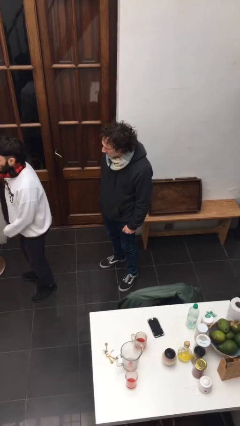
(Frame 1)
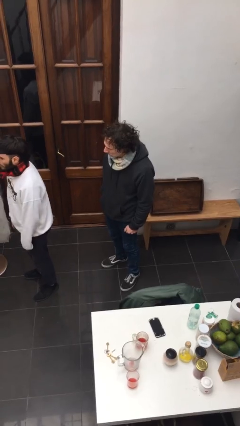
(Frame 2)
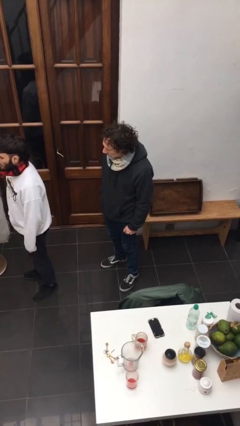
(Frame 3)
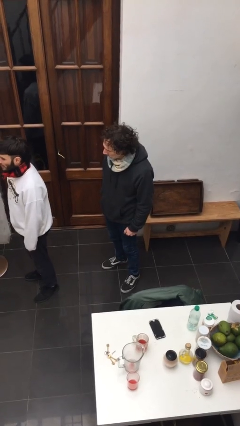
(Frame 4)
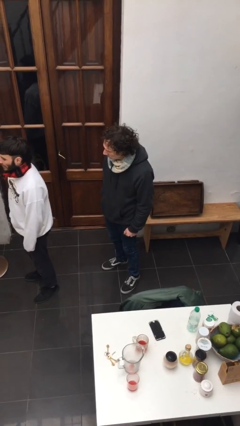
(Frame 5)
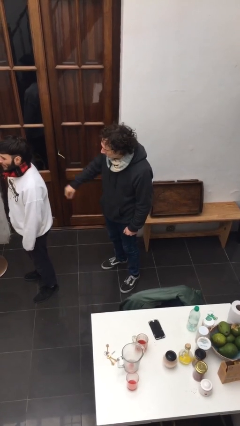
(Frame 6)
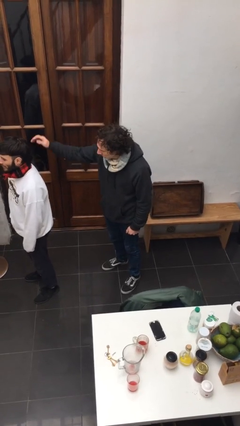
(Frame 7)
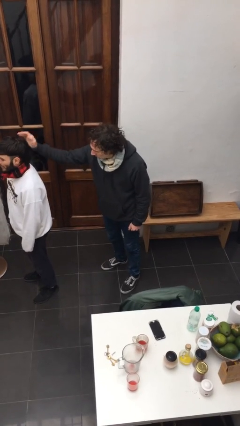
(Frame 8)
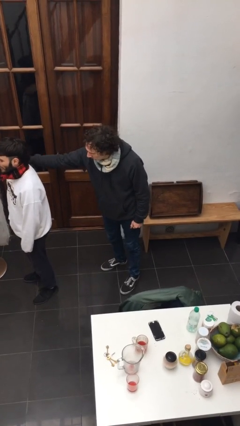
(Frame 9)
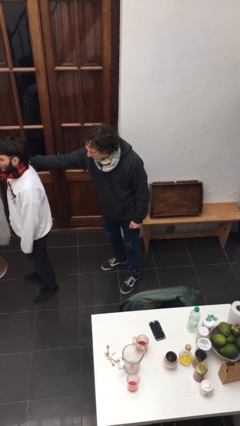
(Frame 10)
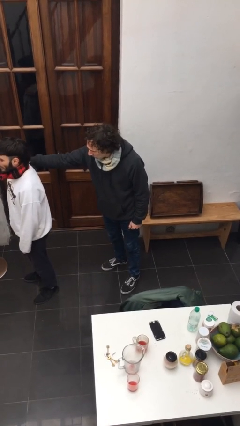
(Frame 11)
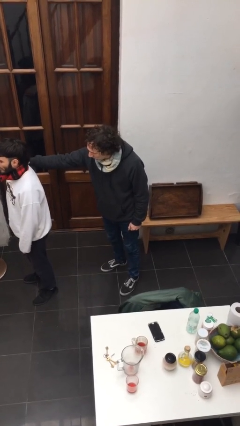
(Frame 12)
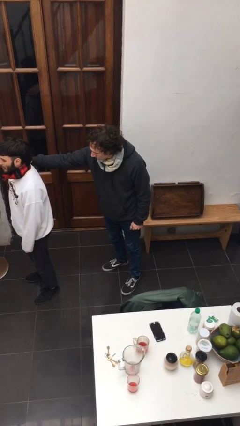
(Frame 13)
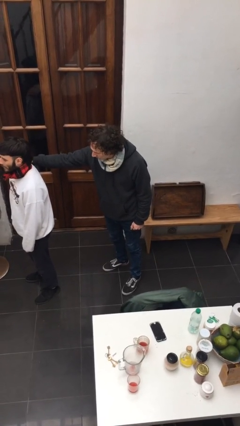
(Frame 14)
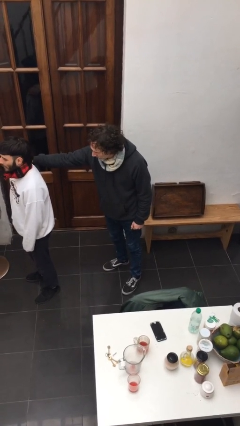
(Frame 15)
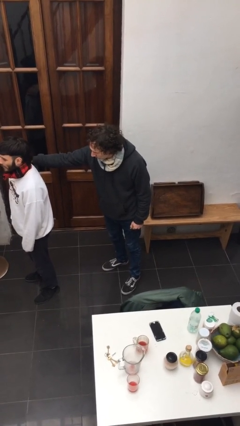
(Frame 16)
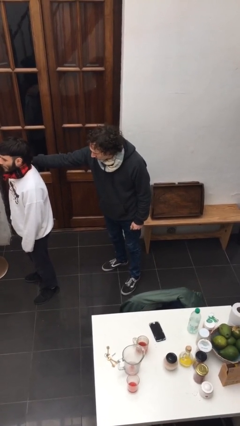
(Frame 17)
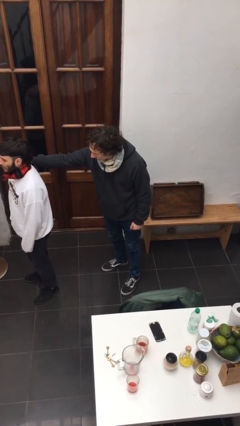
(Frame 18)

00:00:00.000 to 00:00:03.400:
person grabs person by shoulder

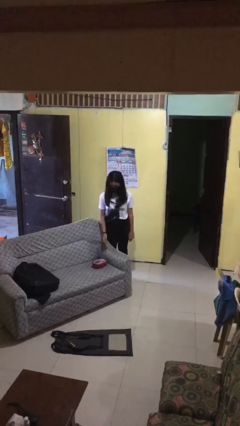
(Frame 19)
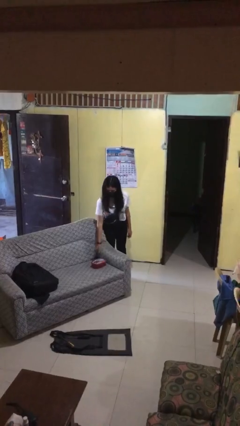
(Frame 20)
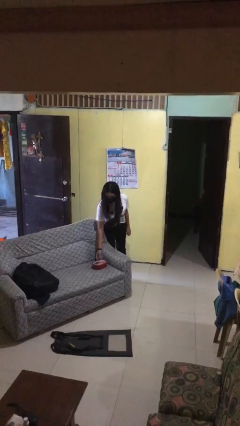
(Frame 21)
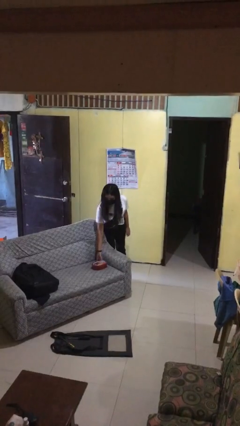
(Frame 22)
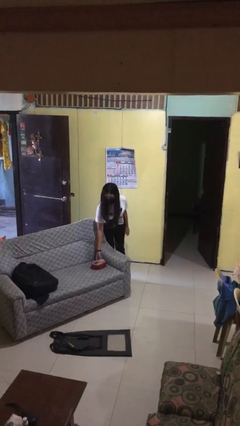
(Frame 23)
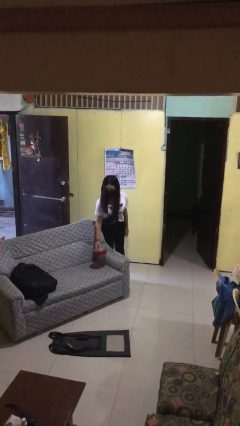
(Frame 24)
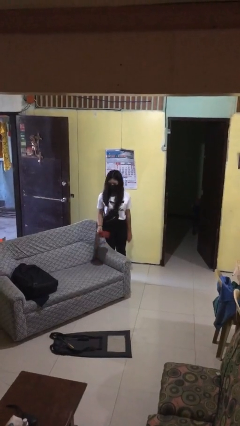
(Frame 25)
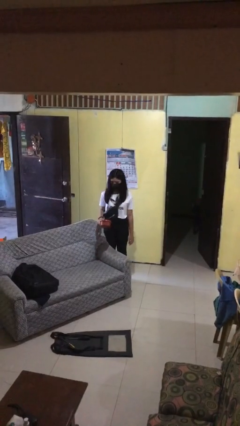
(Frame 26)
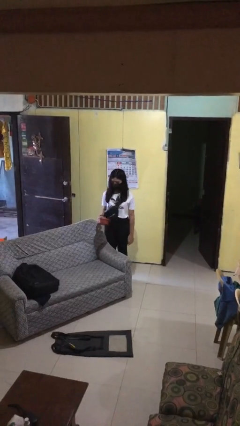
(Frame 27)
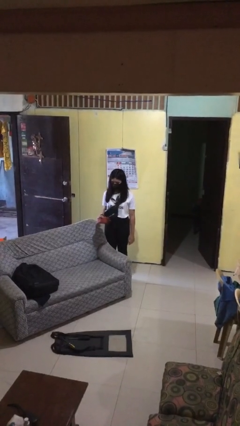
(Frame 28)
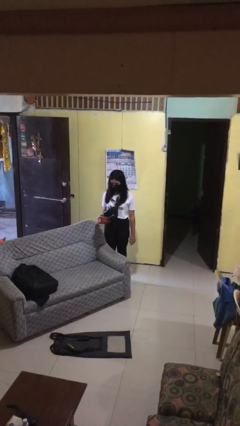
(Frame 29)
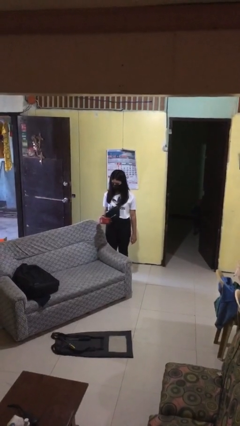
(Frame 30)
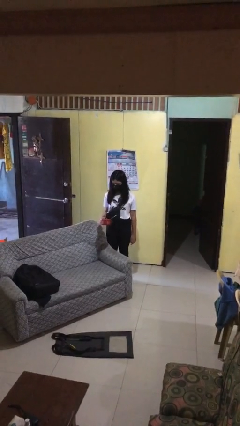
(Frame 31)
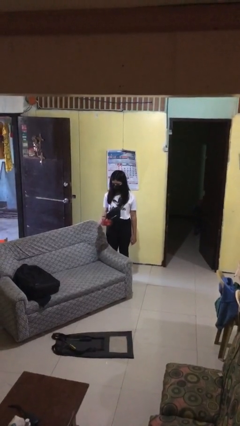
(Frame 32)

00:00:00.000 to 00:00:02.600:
person picks up object from couch

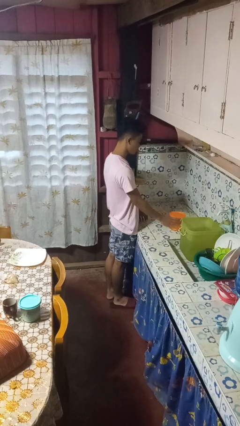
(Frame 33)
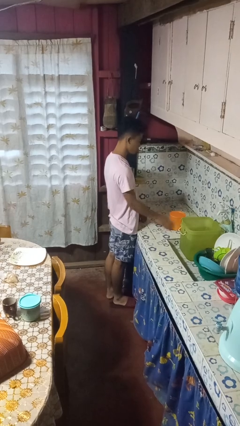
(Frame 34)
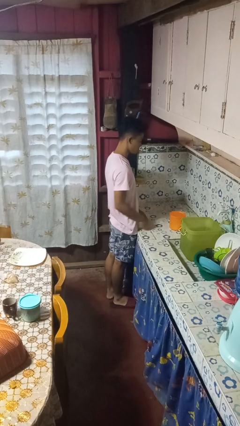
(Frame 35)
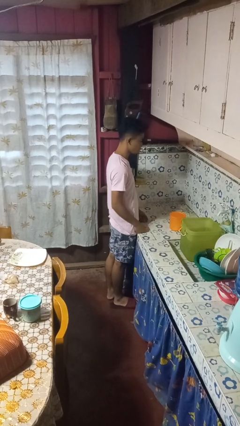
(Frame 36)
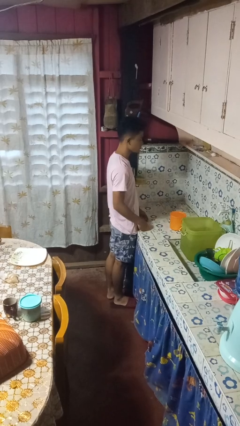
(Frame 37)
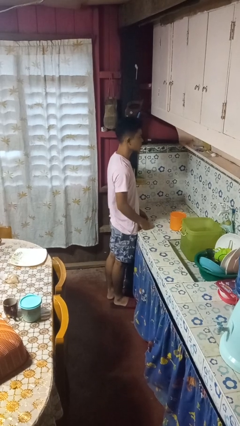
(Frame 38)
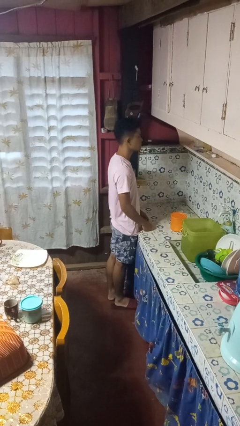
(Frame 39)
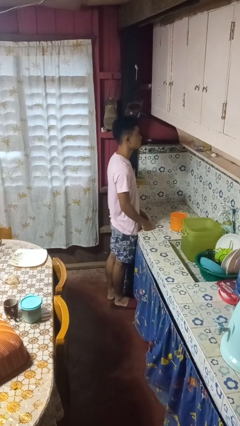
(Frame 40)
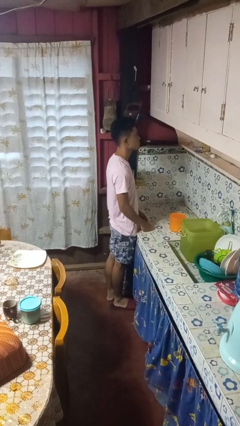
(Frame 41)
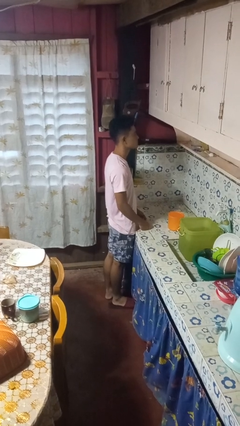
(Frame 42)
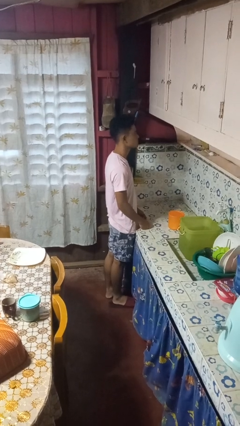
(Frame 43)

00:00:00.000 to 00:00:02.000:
person puts down object on countertop

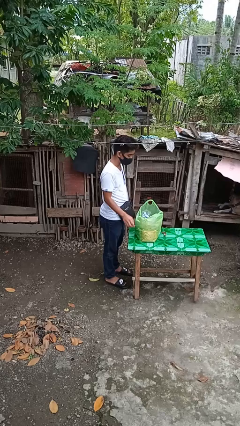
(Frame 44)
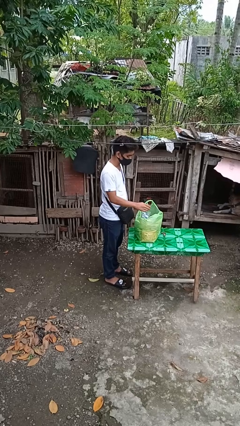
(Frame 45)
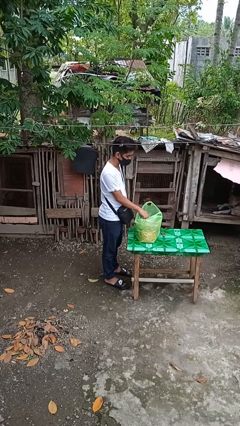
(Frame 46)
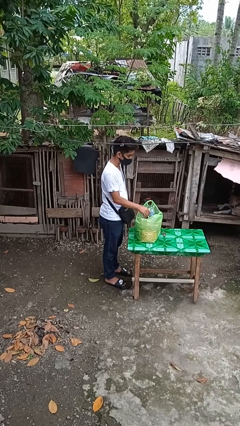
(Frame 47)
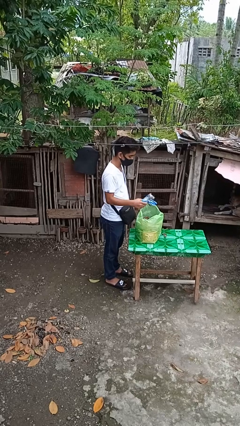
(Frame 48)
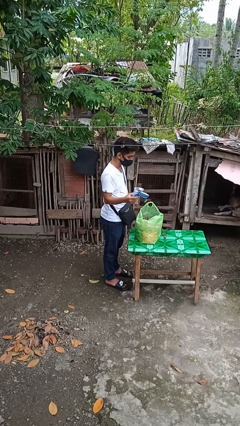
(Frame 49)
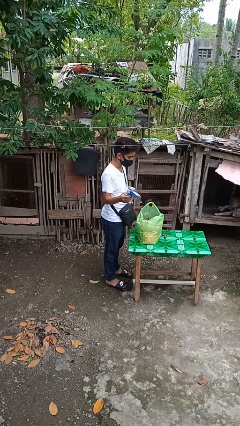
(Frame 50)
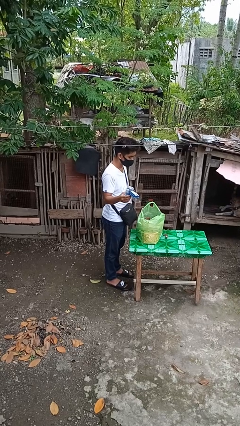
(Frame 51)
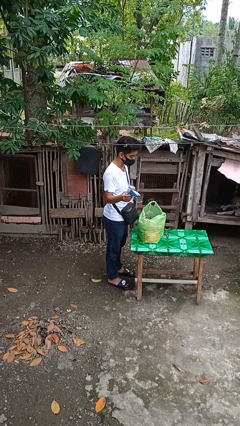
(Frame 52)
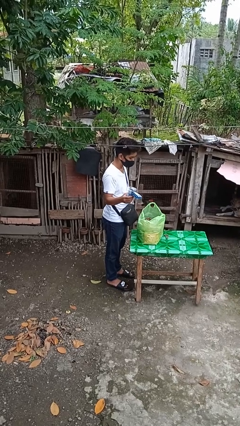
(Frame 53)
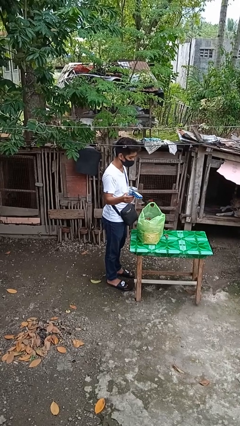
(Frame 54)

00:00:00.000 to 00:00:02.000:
person takes object from bag

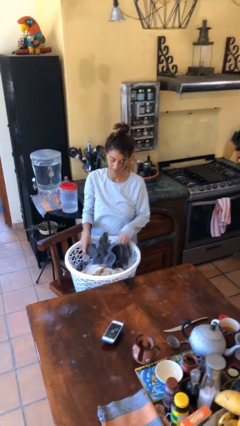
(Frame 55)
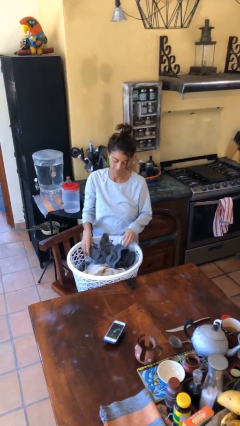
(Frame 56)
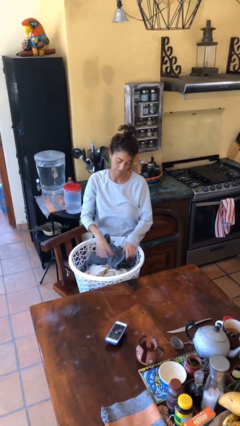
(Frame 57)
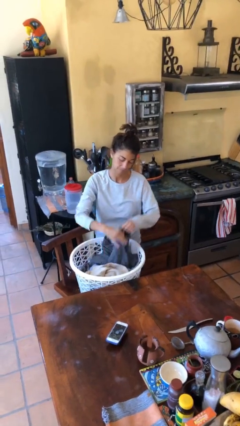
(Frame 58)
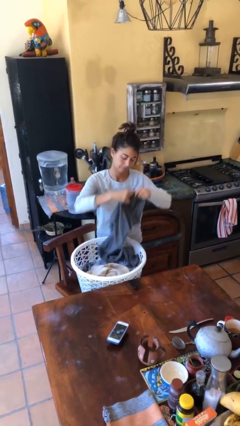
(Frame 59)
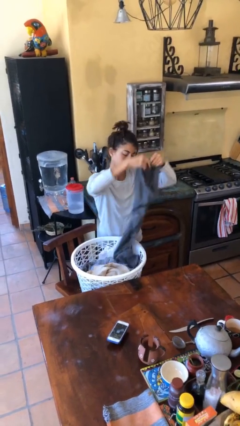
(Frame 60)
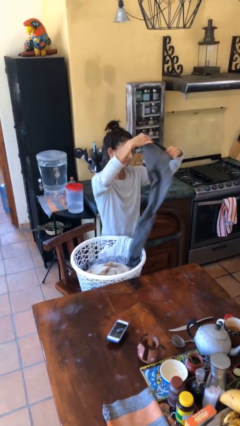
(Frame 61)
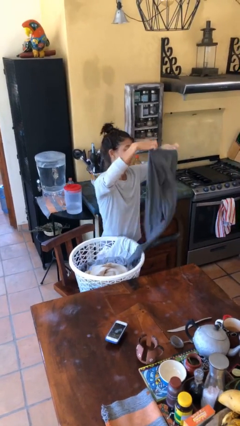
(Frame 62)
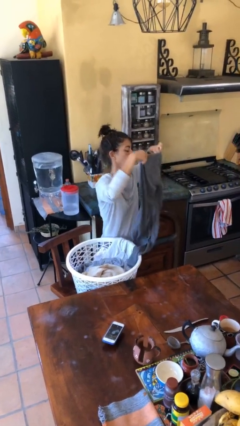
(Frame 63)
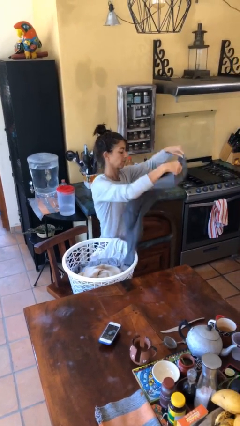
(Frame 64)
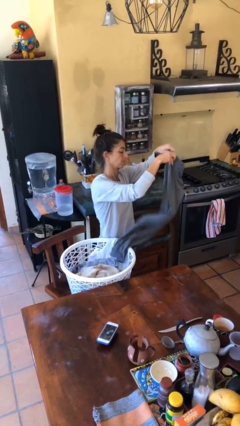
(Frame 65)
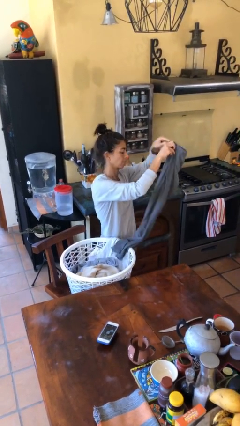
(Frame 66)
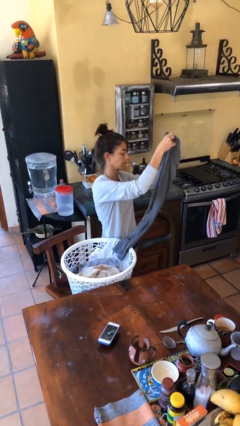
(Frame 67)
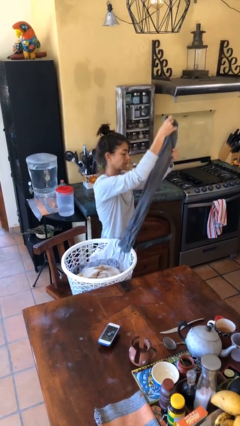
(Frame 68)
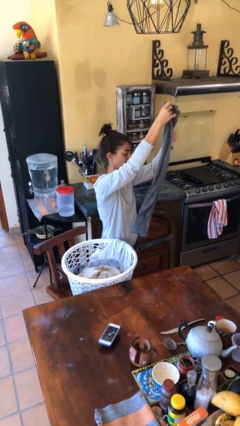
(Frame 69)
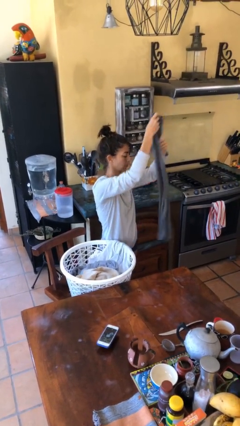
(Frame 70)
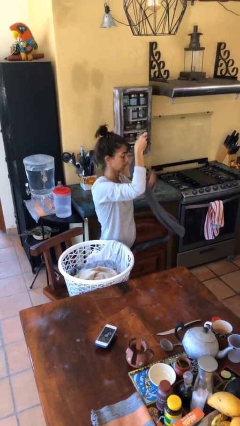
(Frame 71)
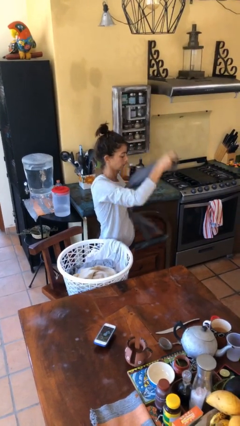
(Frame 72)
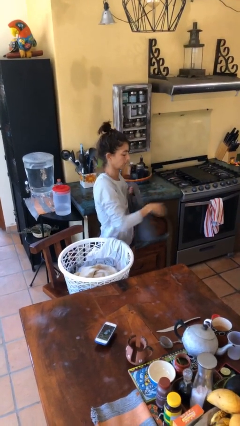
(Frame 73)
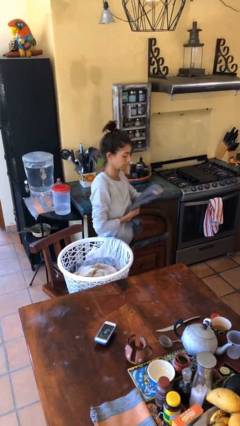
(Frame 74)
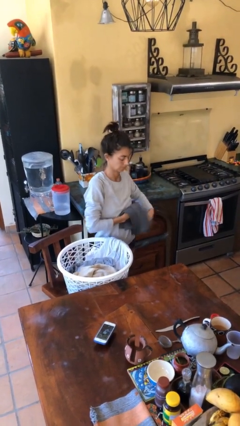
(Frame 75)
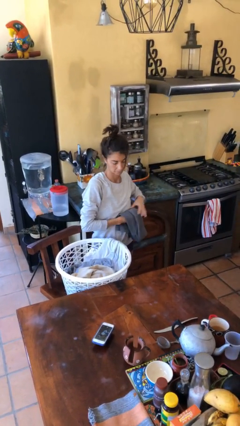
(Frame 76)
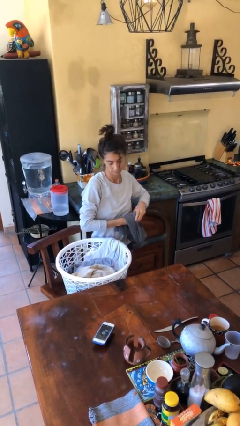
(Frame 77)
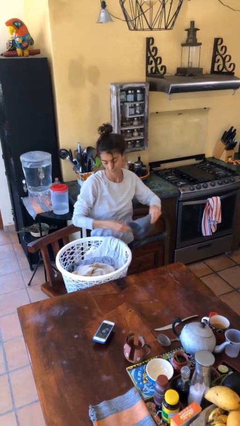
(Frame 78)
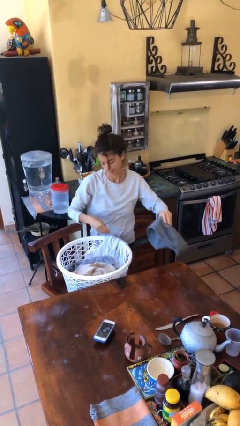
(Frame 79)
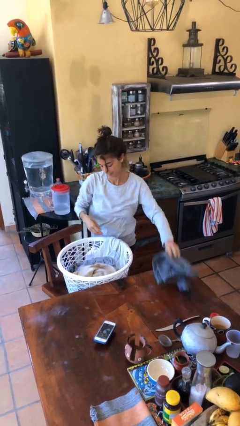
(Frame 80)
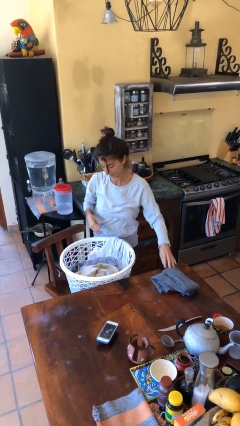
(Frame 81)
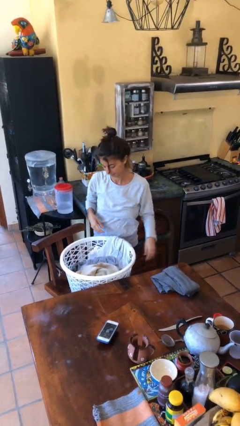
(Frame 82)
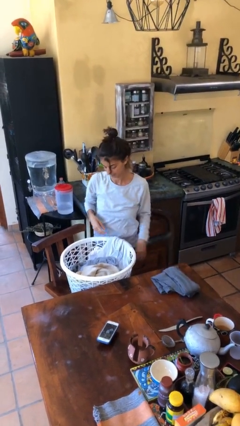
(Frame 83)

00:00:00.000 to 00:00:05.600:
person folds pants

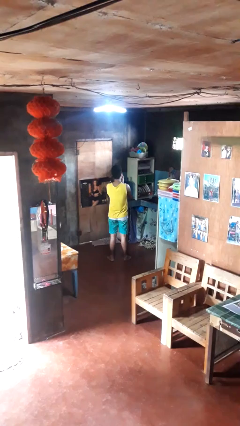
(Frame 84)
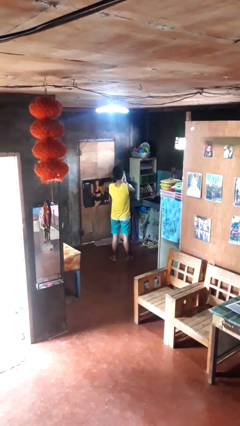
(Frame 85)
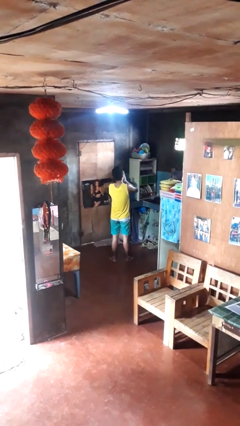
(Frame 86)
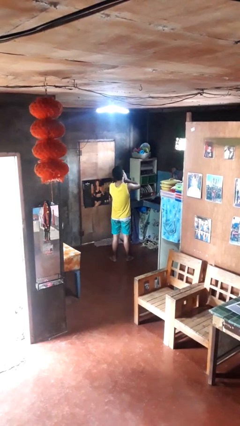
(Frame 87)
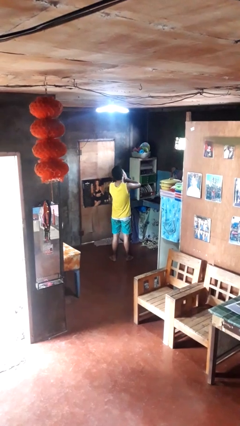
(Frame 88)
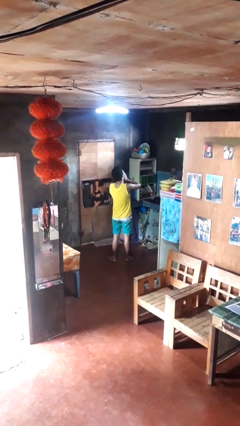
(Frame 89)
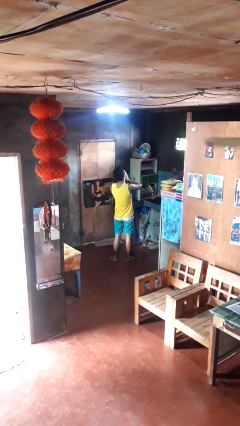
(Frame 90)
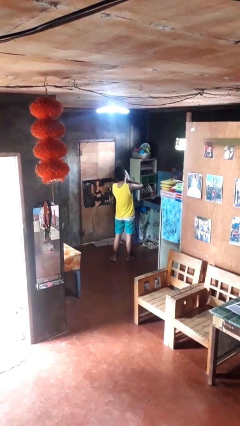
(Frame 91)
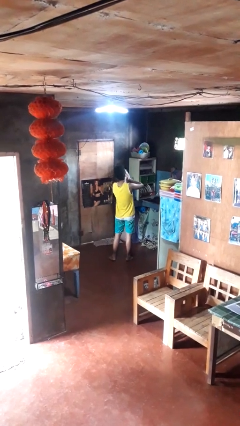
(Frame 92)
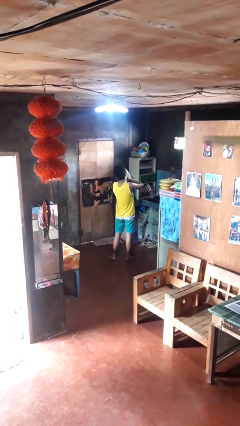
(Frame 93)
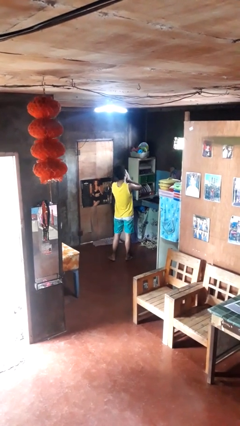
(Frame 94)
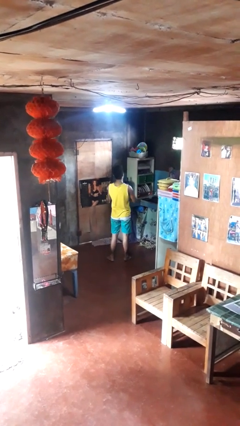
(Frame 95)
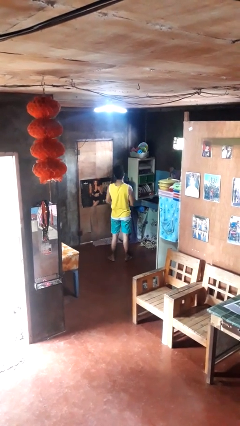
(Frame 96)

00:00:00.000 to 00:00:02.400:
person yawns
